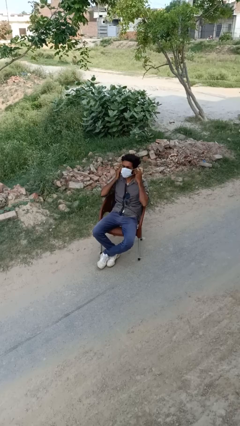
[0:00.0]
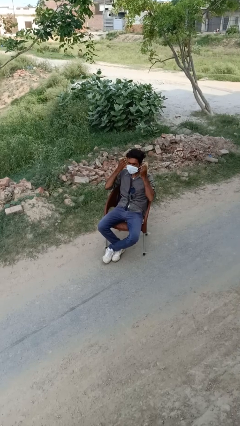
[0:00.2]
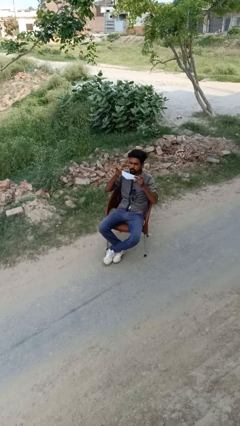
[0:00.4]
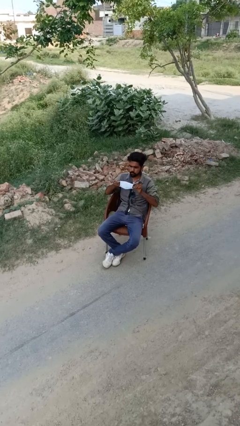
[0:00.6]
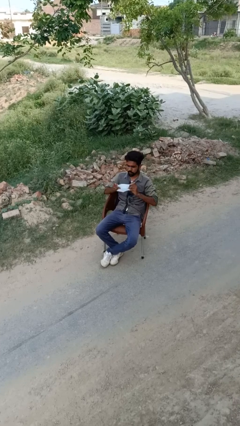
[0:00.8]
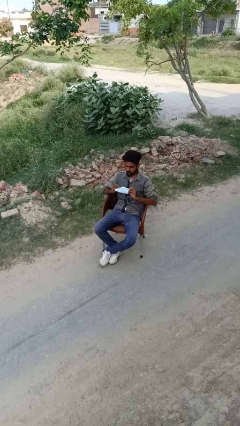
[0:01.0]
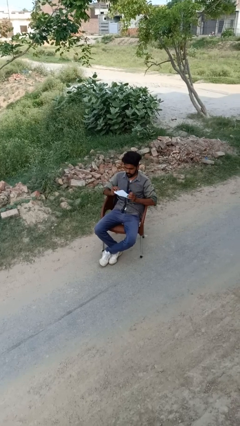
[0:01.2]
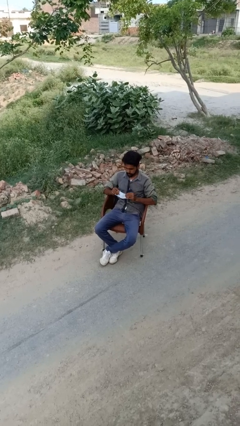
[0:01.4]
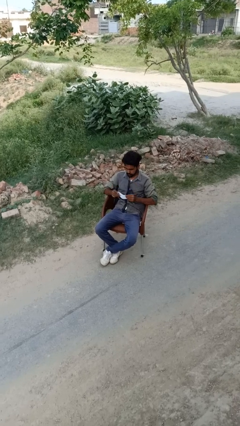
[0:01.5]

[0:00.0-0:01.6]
person takes off facemask

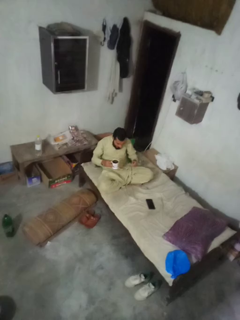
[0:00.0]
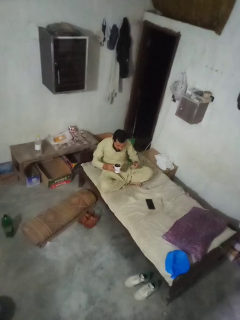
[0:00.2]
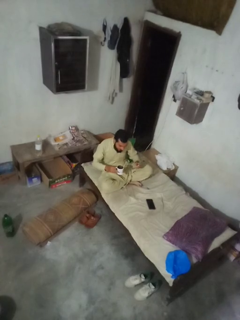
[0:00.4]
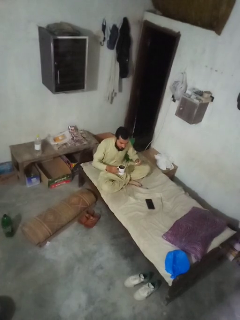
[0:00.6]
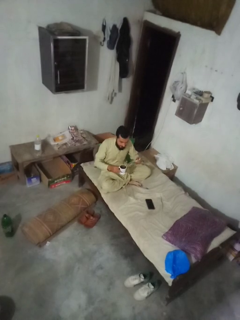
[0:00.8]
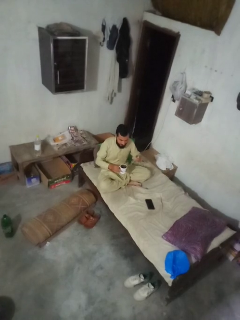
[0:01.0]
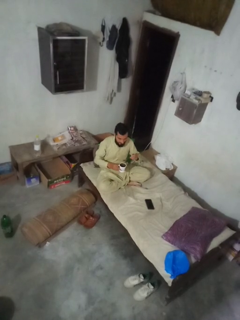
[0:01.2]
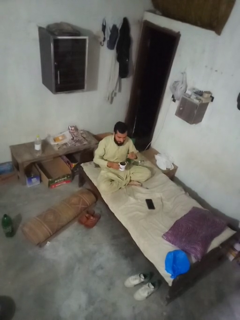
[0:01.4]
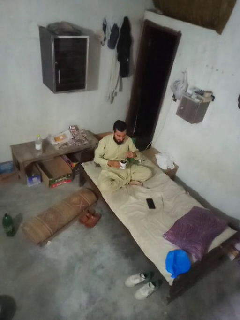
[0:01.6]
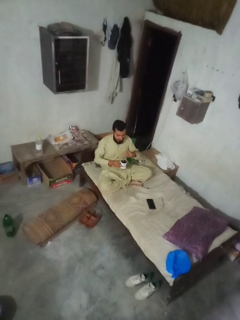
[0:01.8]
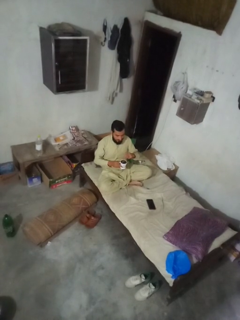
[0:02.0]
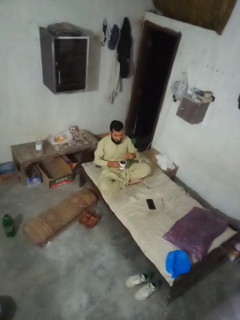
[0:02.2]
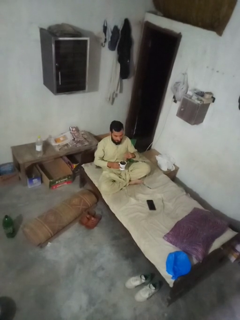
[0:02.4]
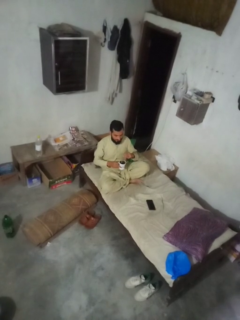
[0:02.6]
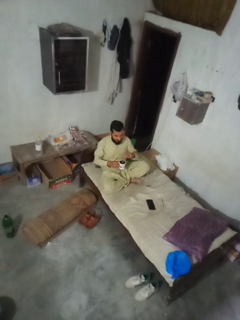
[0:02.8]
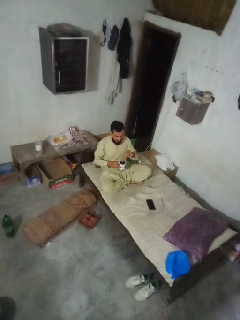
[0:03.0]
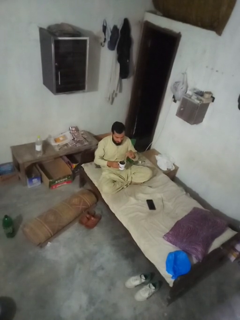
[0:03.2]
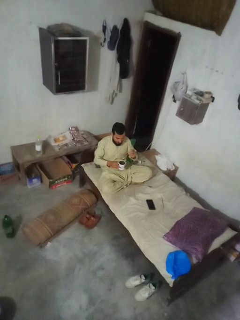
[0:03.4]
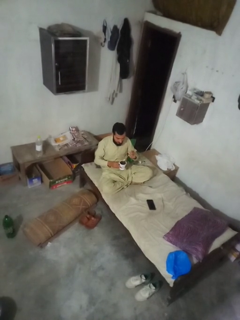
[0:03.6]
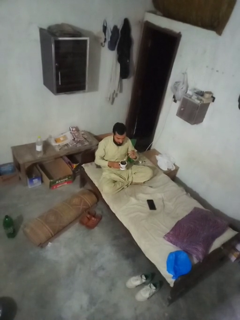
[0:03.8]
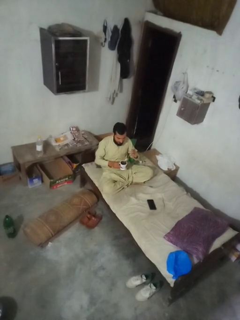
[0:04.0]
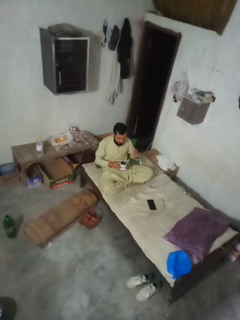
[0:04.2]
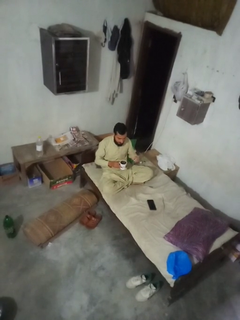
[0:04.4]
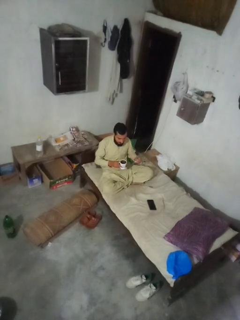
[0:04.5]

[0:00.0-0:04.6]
person stirs mug

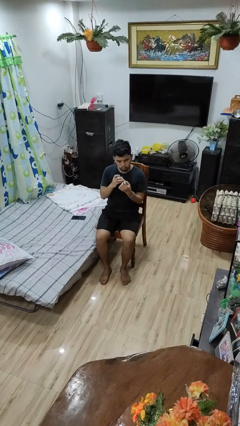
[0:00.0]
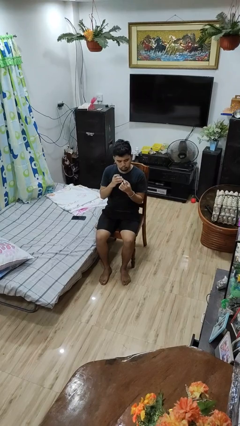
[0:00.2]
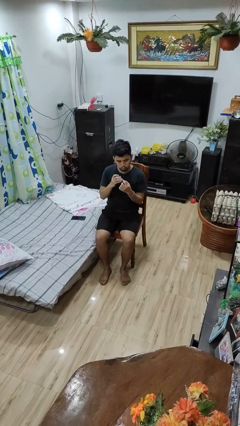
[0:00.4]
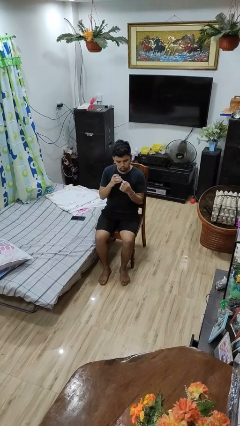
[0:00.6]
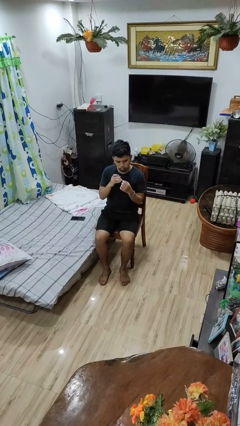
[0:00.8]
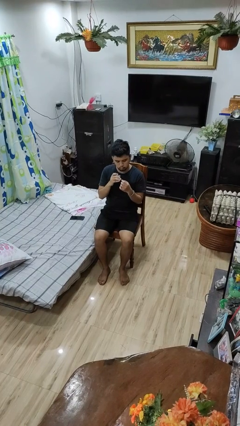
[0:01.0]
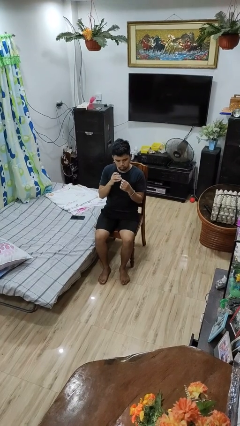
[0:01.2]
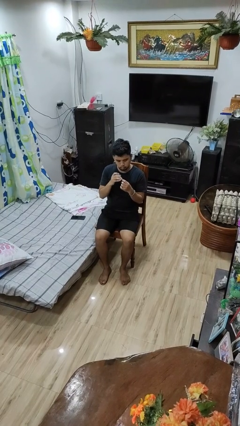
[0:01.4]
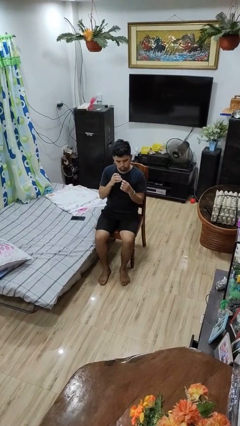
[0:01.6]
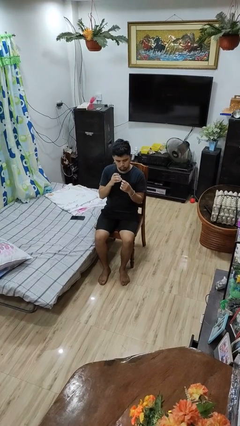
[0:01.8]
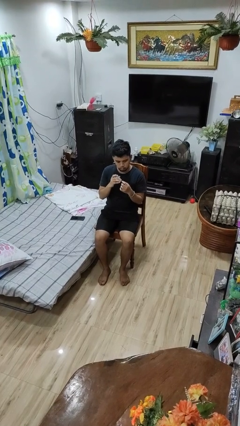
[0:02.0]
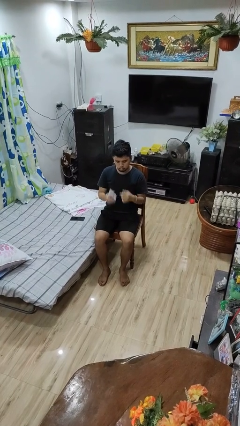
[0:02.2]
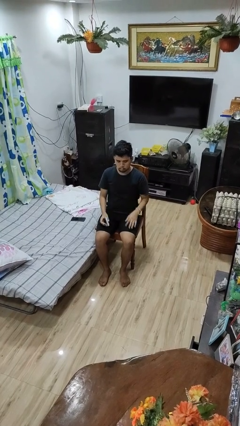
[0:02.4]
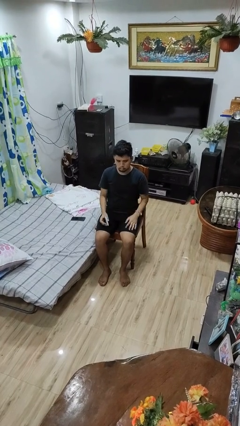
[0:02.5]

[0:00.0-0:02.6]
person clips fingernails

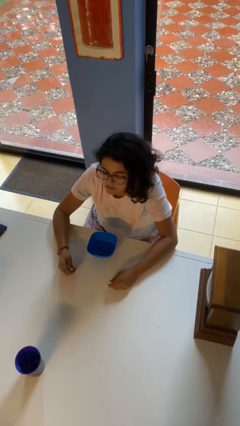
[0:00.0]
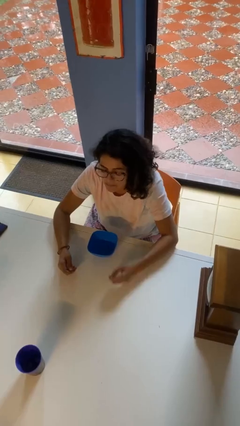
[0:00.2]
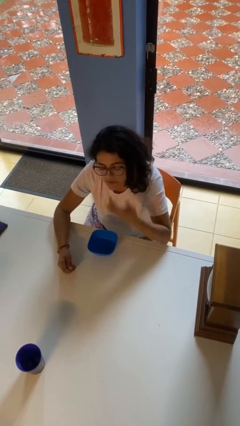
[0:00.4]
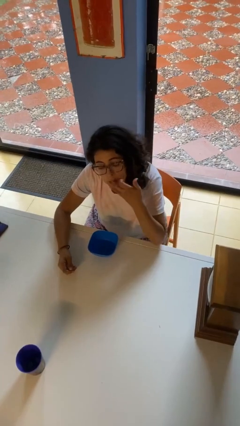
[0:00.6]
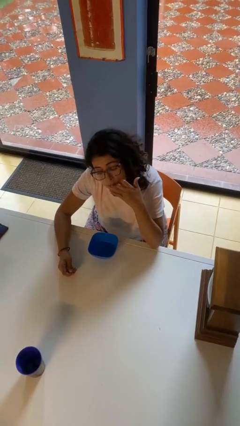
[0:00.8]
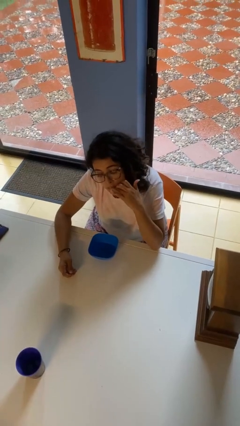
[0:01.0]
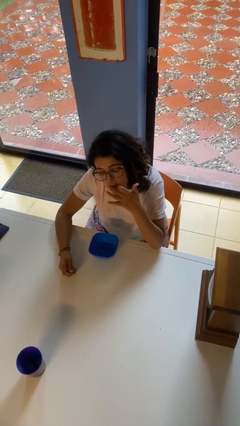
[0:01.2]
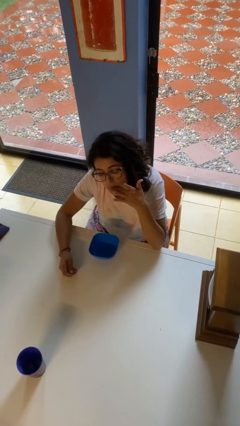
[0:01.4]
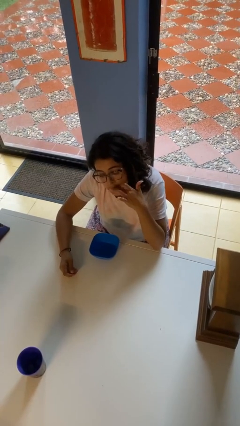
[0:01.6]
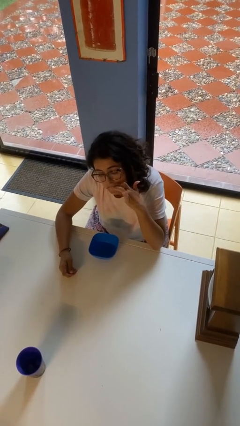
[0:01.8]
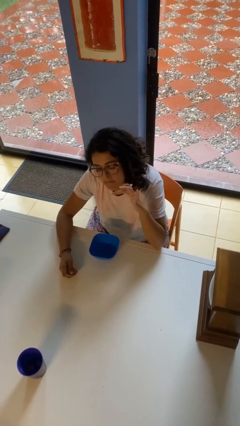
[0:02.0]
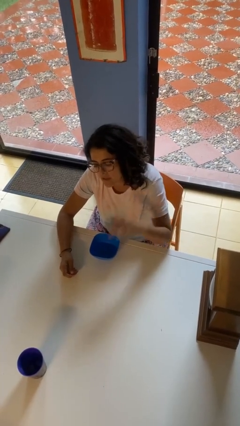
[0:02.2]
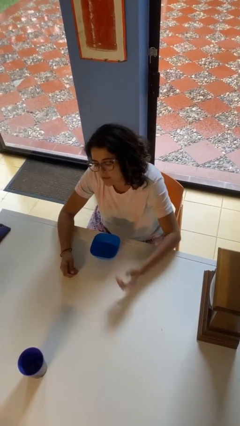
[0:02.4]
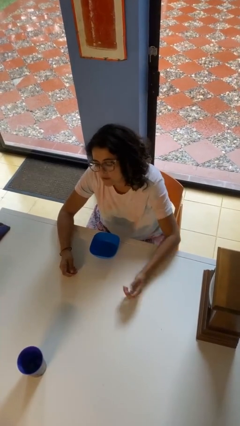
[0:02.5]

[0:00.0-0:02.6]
person licks fingers

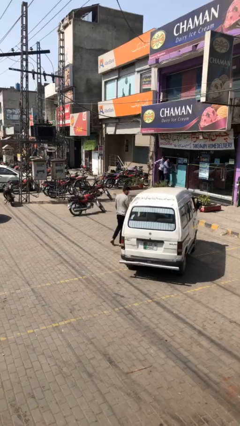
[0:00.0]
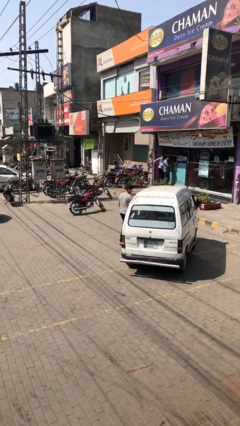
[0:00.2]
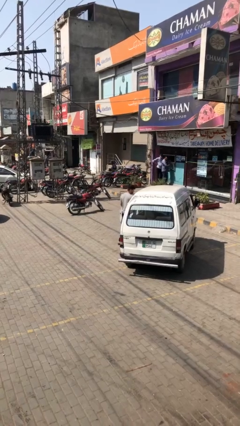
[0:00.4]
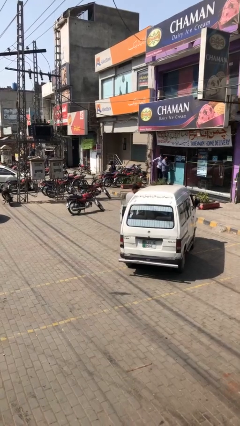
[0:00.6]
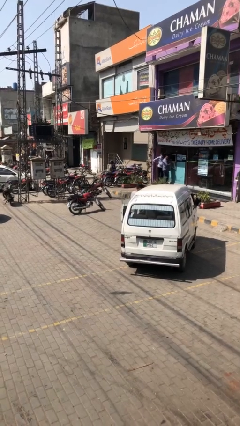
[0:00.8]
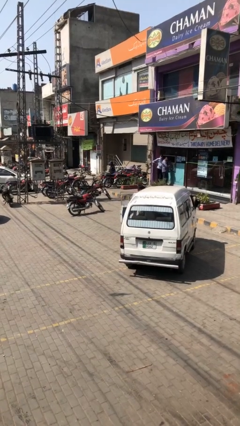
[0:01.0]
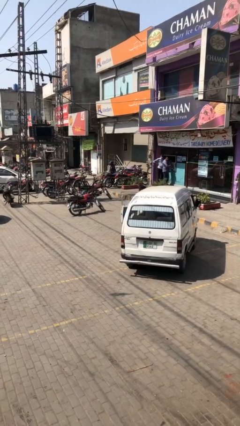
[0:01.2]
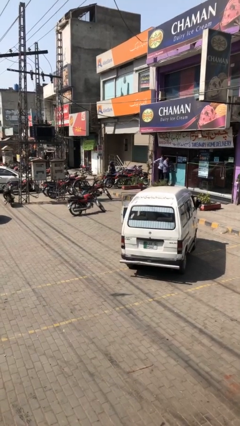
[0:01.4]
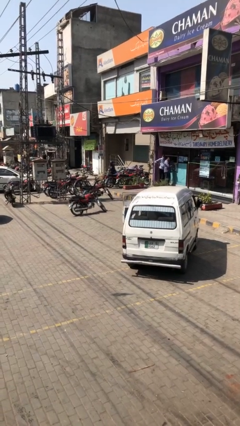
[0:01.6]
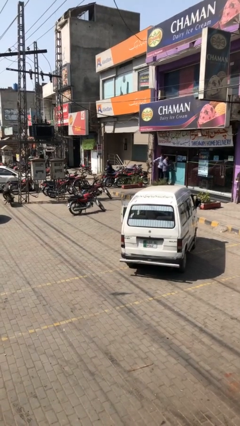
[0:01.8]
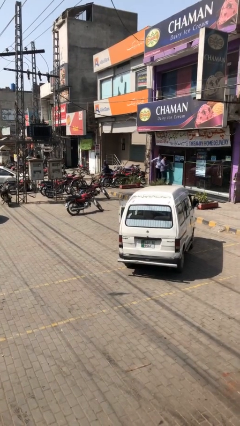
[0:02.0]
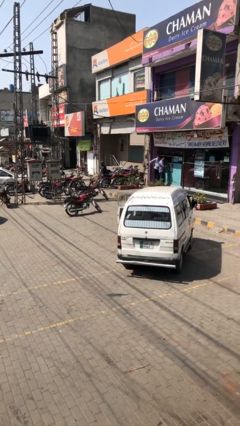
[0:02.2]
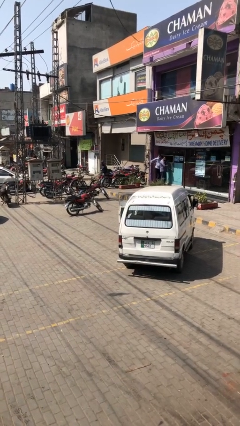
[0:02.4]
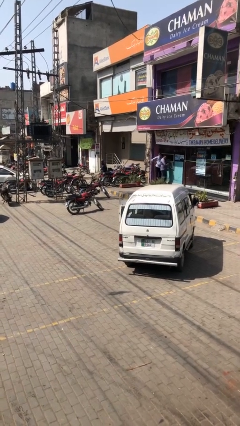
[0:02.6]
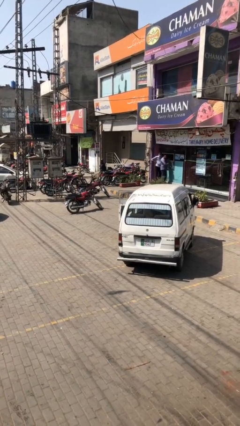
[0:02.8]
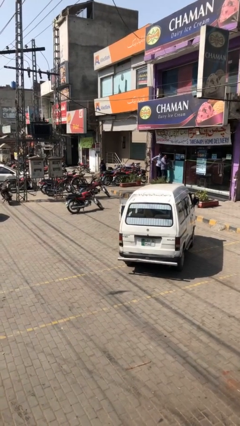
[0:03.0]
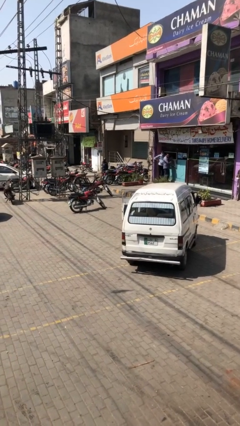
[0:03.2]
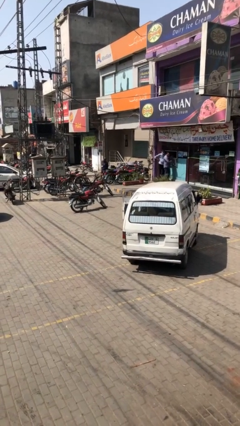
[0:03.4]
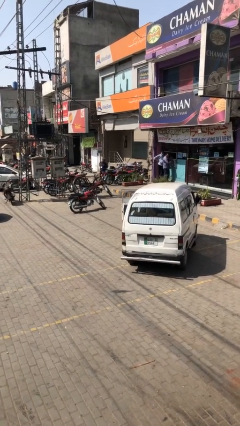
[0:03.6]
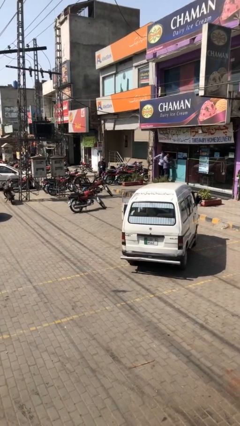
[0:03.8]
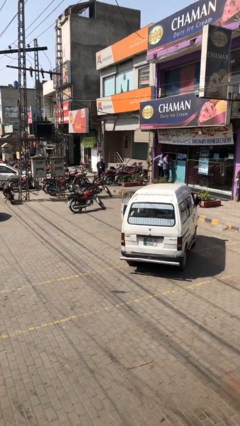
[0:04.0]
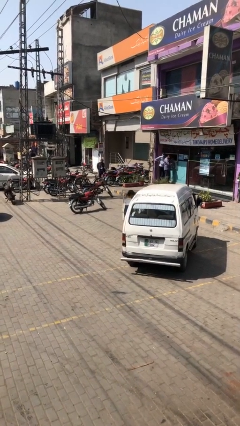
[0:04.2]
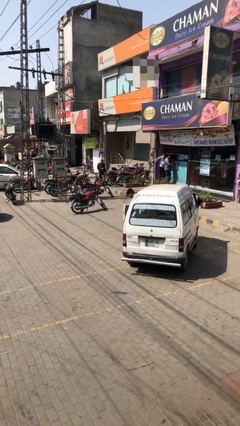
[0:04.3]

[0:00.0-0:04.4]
person enters car

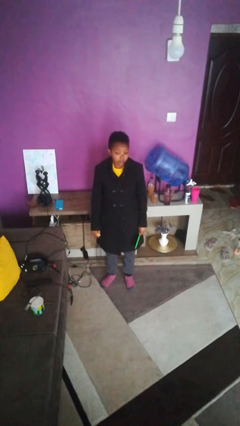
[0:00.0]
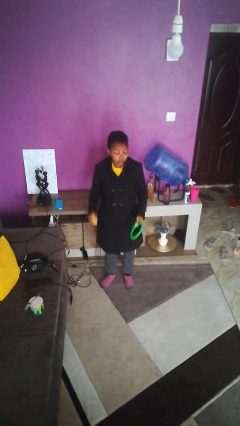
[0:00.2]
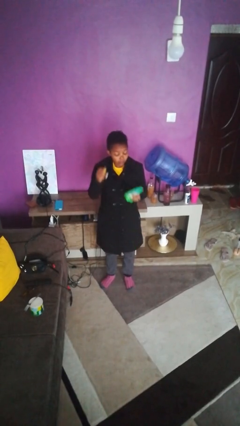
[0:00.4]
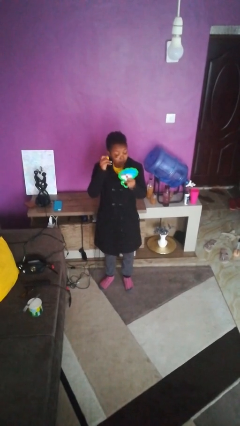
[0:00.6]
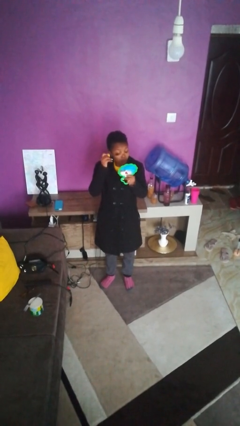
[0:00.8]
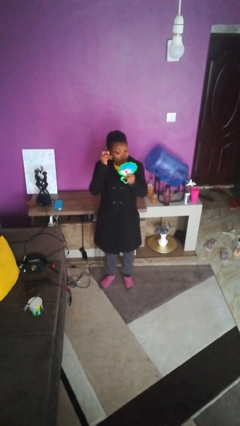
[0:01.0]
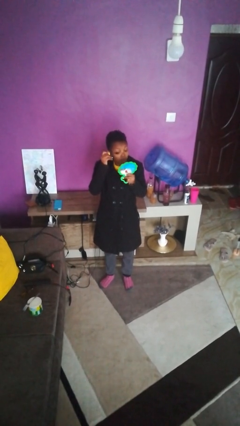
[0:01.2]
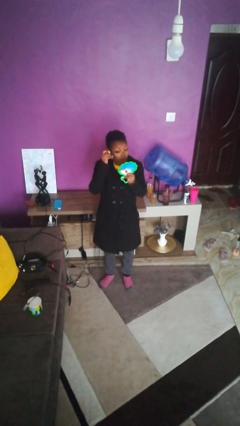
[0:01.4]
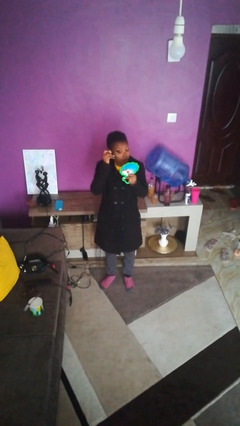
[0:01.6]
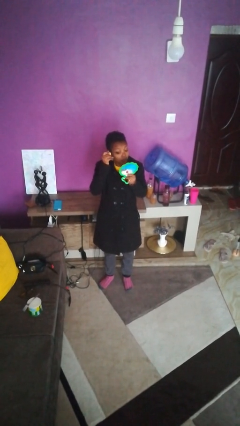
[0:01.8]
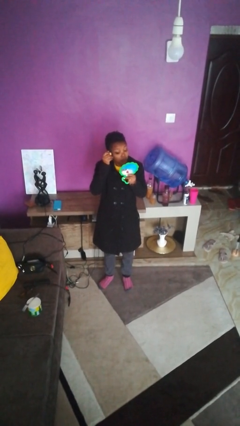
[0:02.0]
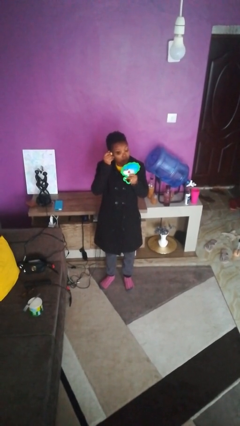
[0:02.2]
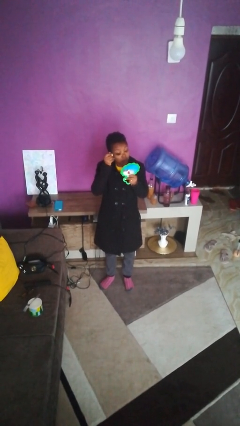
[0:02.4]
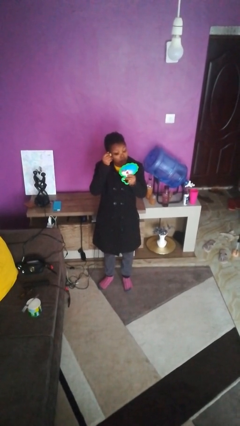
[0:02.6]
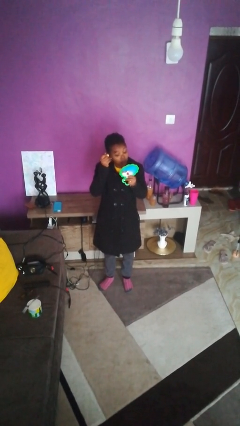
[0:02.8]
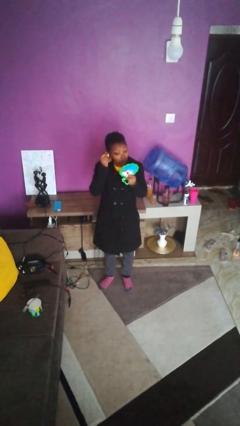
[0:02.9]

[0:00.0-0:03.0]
person applies eye makeup
